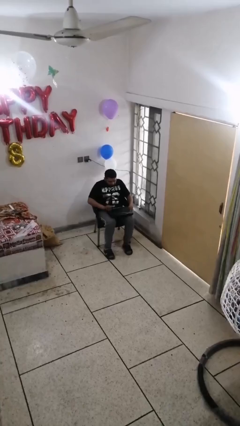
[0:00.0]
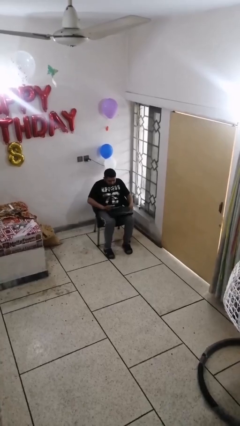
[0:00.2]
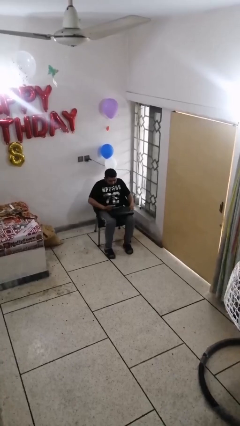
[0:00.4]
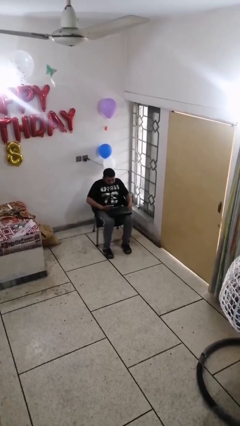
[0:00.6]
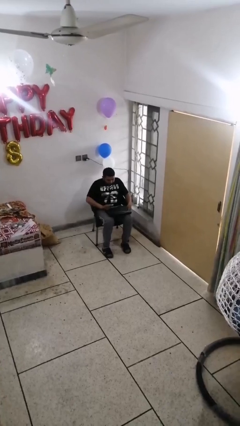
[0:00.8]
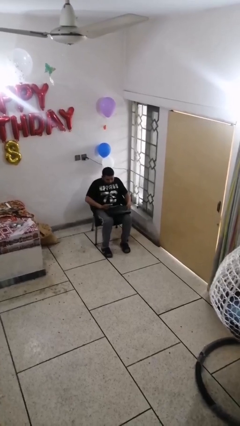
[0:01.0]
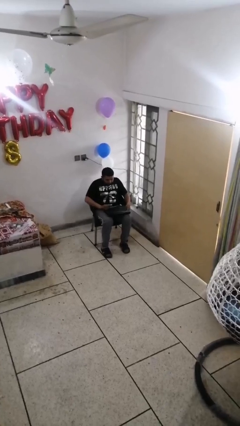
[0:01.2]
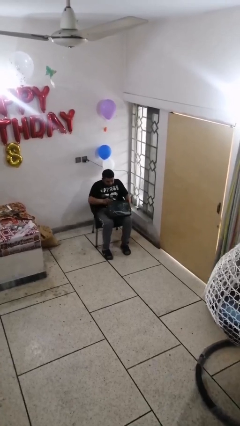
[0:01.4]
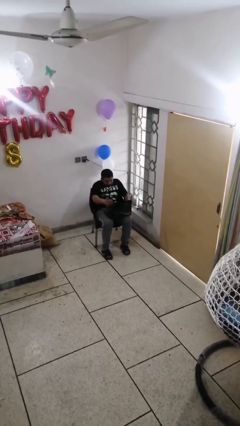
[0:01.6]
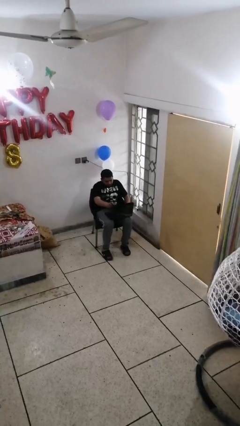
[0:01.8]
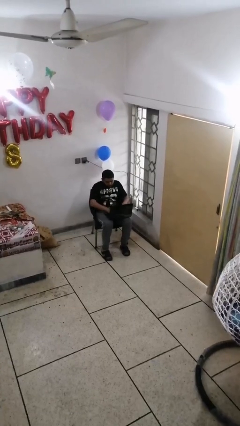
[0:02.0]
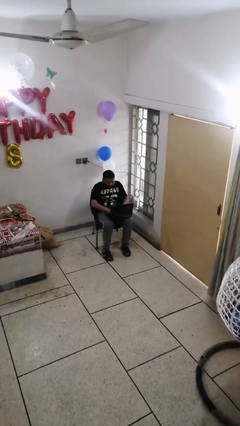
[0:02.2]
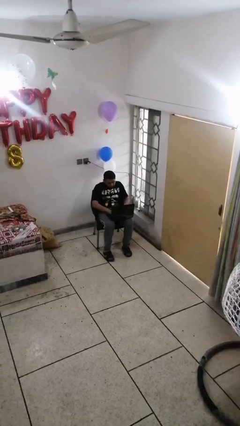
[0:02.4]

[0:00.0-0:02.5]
person interacts with laptop

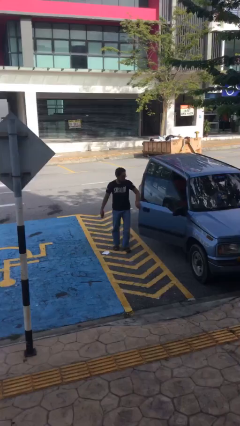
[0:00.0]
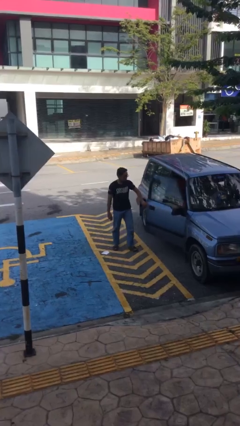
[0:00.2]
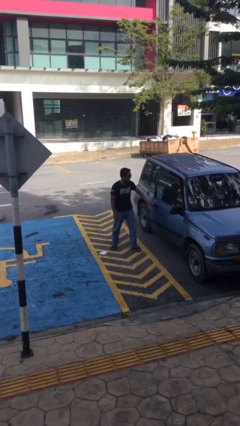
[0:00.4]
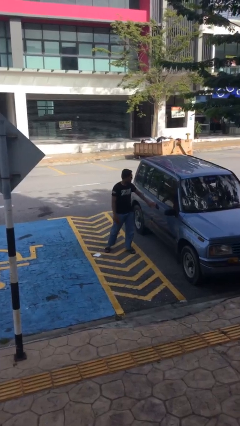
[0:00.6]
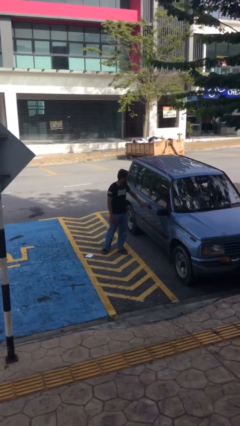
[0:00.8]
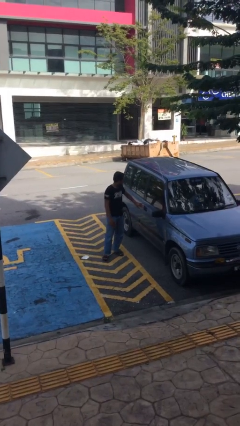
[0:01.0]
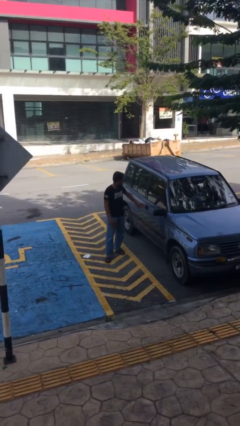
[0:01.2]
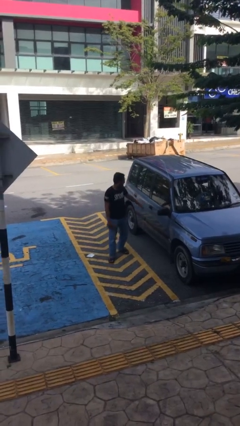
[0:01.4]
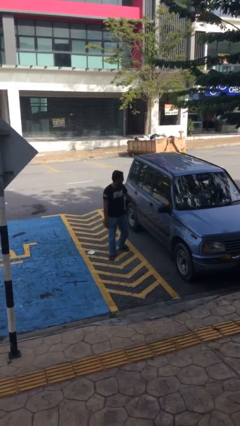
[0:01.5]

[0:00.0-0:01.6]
person closes car door

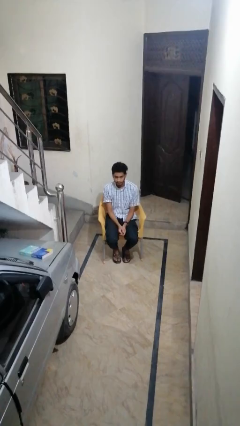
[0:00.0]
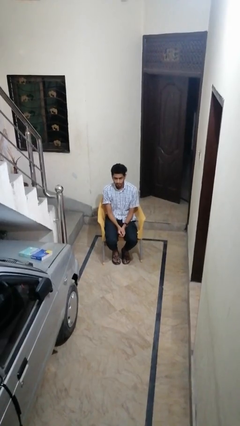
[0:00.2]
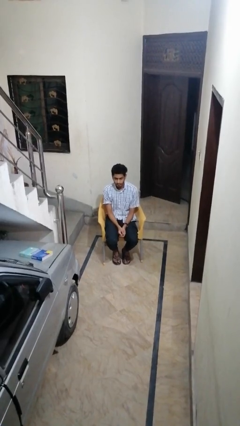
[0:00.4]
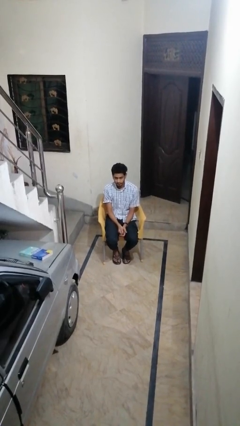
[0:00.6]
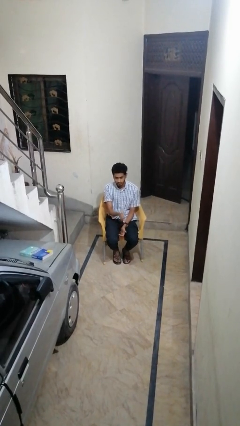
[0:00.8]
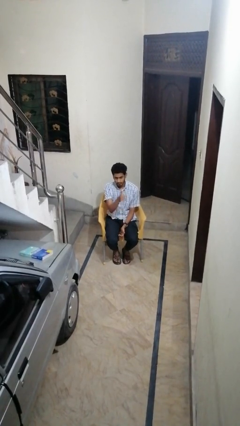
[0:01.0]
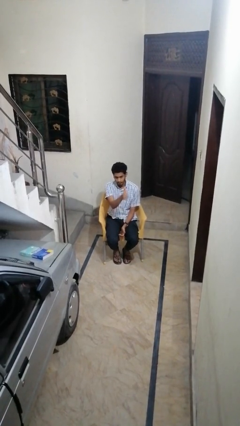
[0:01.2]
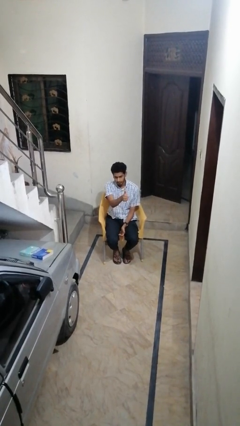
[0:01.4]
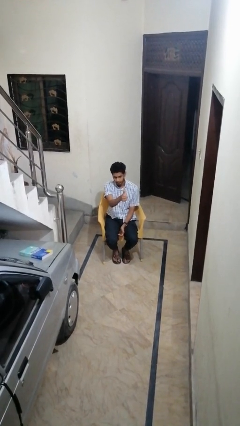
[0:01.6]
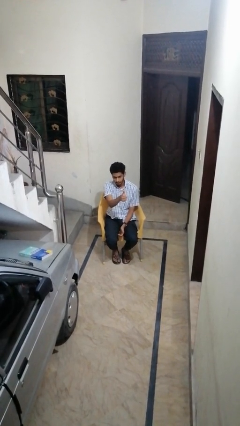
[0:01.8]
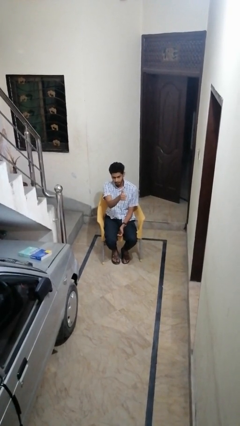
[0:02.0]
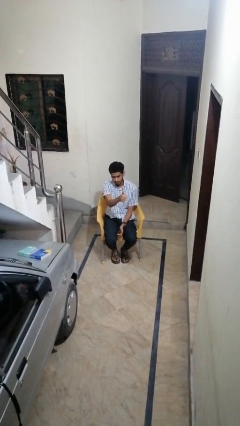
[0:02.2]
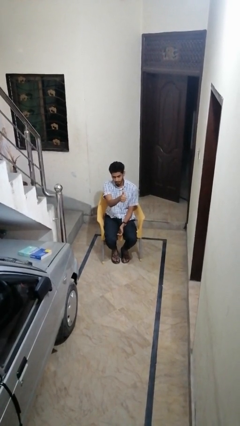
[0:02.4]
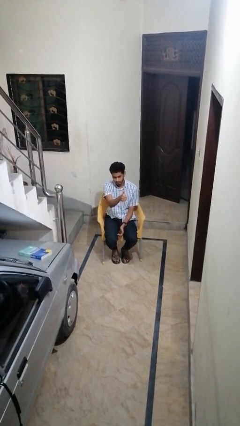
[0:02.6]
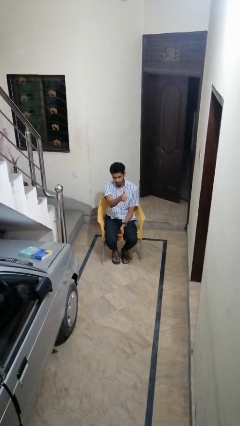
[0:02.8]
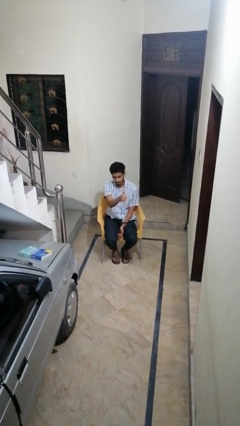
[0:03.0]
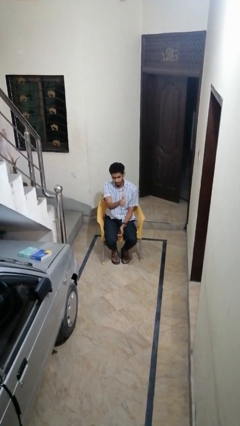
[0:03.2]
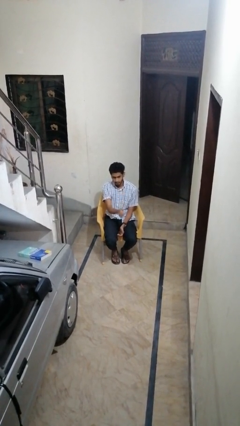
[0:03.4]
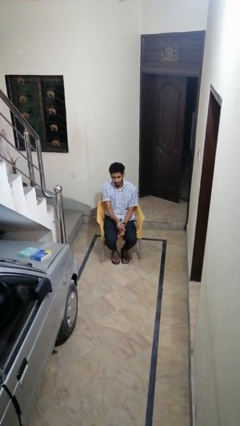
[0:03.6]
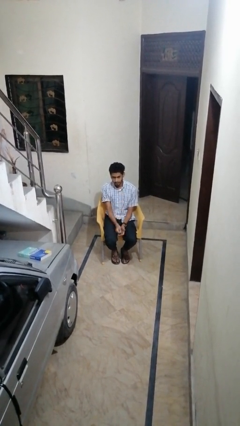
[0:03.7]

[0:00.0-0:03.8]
person gestures thumbs up

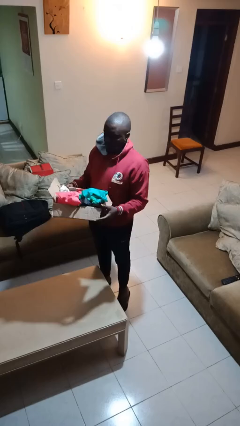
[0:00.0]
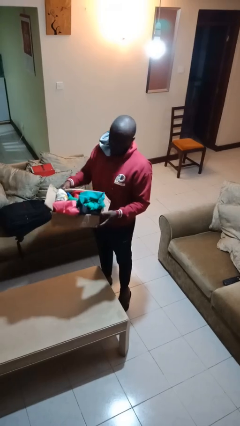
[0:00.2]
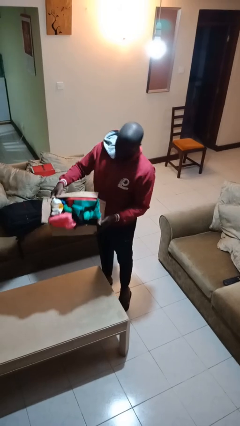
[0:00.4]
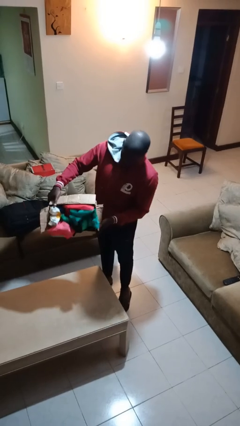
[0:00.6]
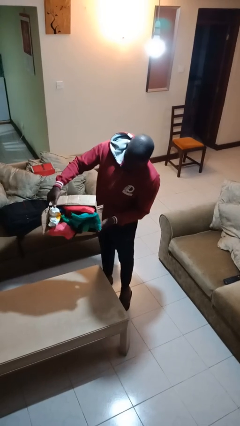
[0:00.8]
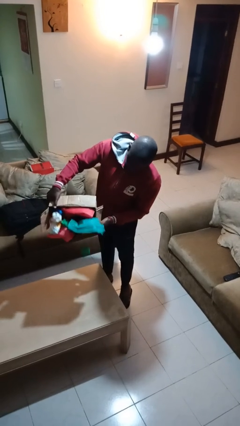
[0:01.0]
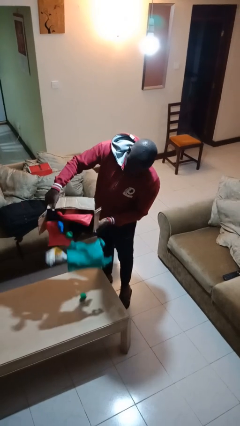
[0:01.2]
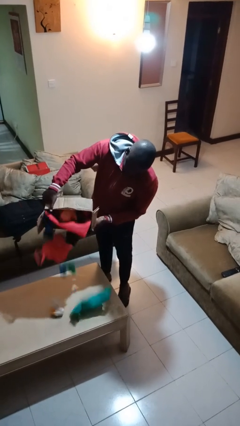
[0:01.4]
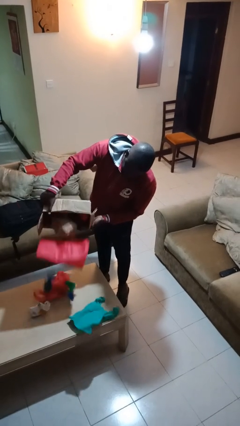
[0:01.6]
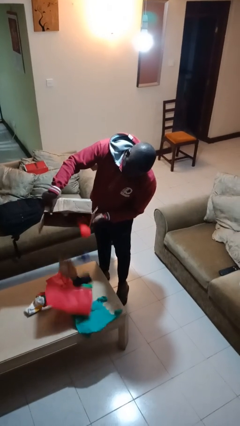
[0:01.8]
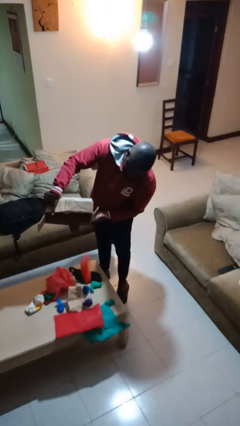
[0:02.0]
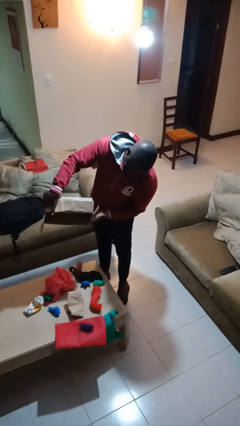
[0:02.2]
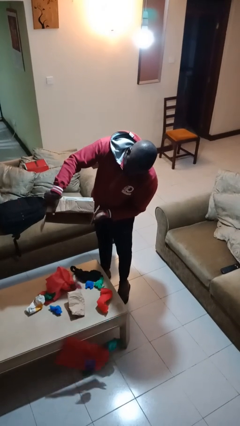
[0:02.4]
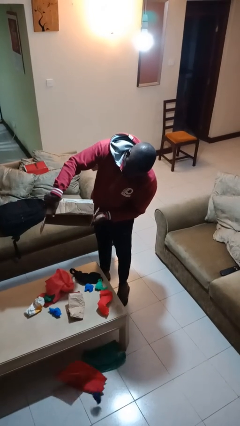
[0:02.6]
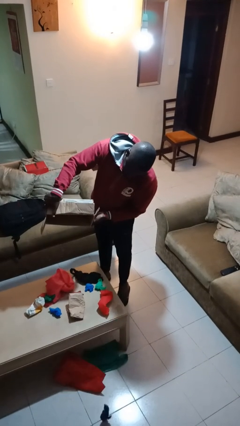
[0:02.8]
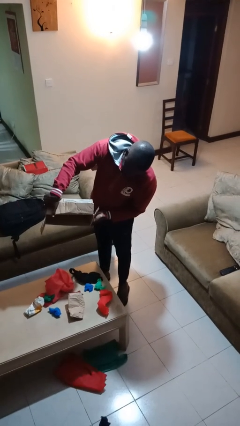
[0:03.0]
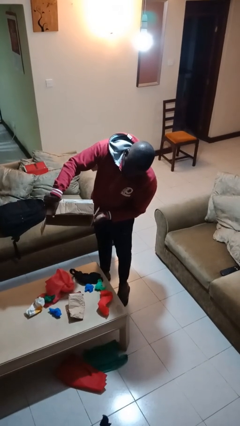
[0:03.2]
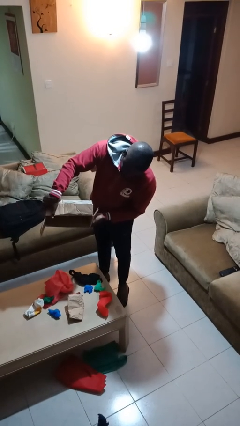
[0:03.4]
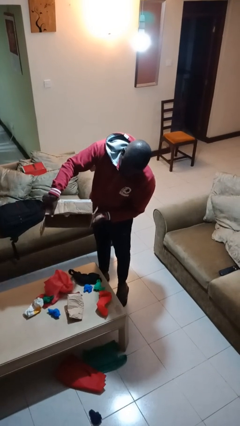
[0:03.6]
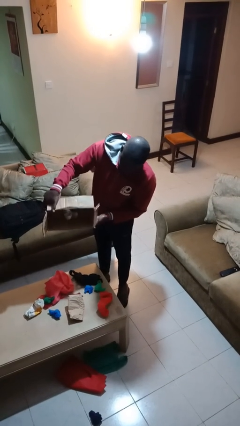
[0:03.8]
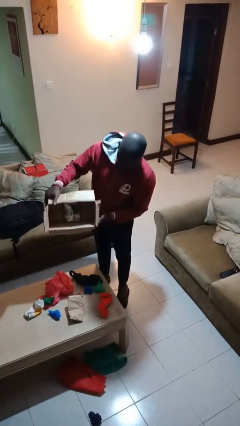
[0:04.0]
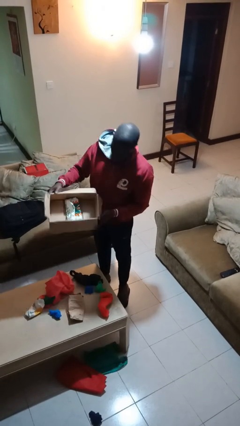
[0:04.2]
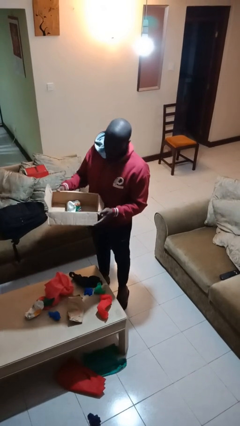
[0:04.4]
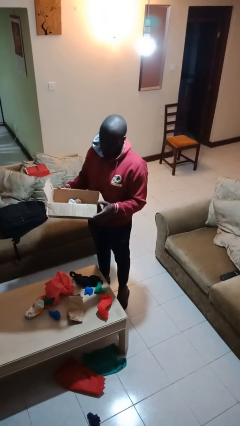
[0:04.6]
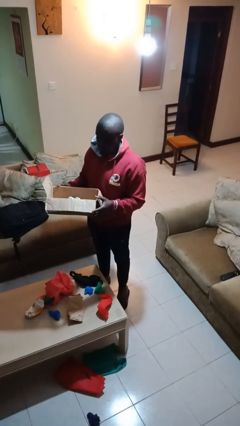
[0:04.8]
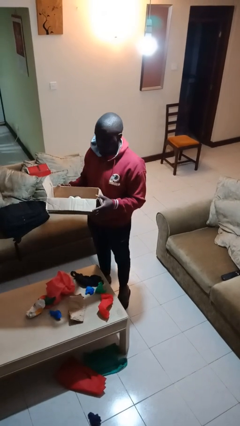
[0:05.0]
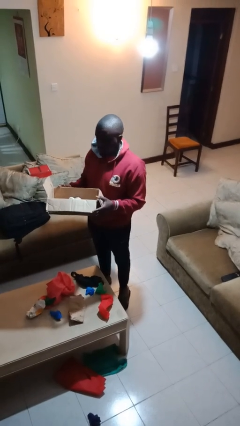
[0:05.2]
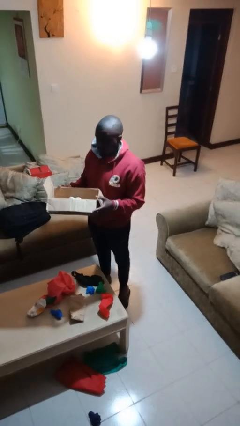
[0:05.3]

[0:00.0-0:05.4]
person unloads box onto table

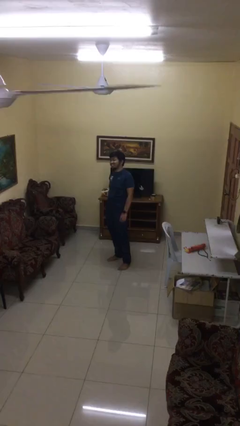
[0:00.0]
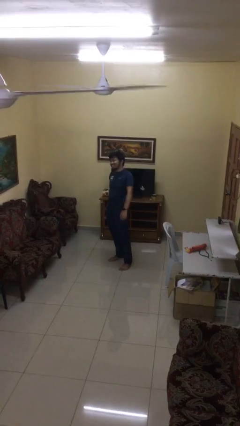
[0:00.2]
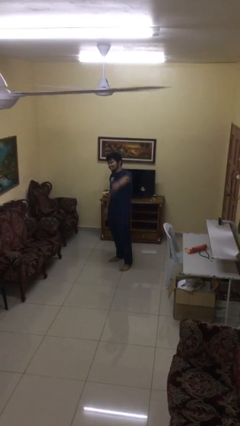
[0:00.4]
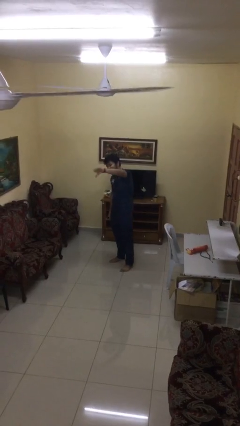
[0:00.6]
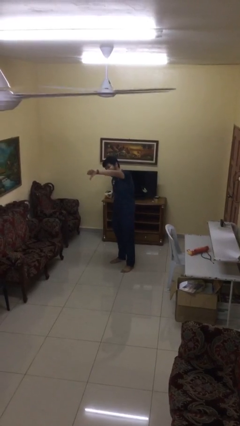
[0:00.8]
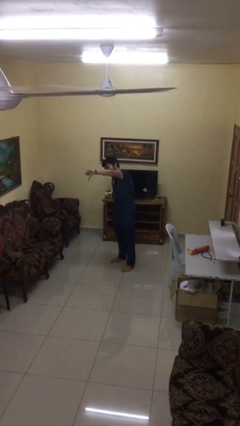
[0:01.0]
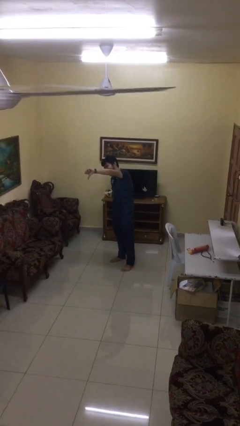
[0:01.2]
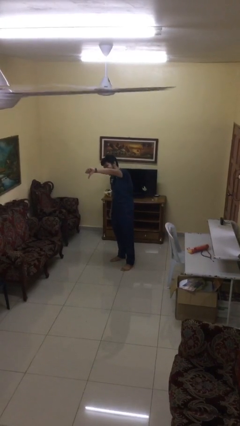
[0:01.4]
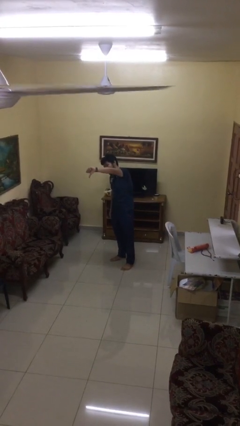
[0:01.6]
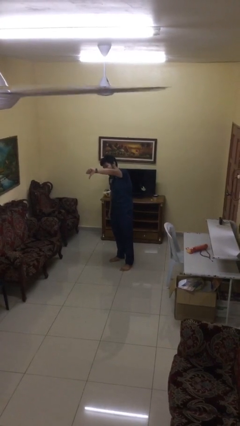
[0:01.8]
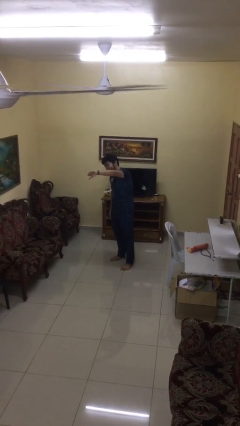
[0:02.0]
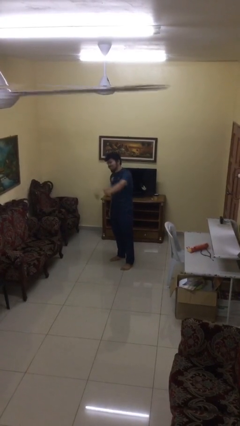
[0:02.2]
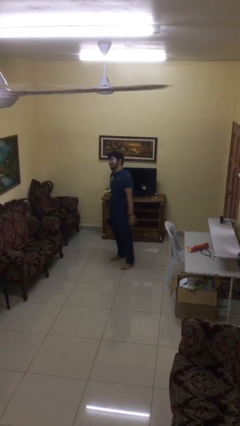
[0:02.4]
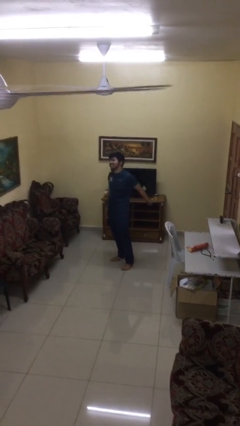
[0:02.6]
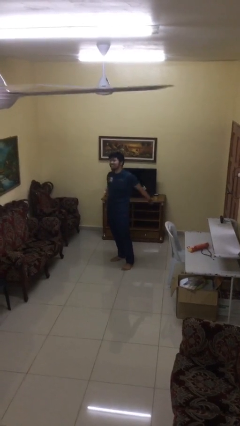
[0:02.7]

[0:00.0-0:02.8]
person gestures thumbs down

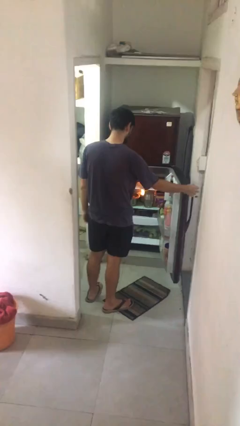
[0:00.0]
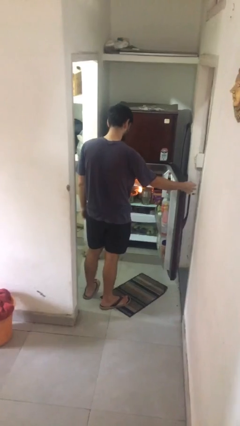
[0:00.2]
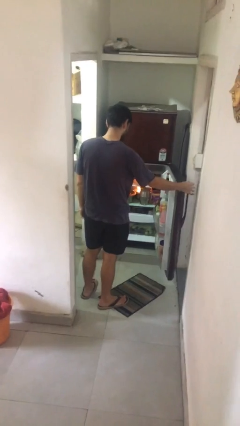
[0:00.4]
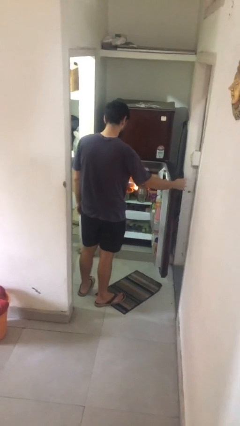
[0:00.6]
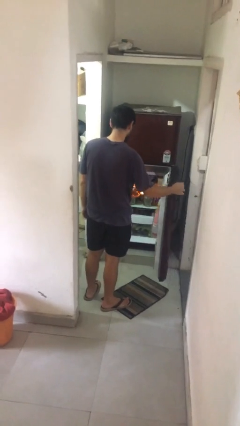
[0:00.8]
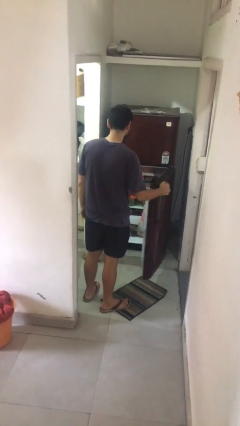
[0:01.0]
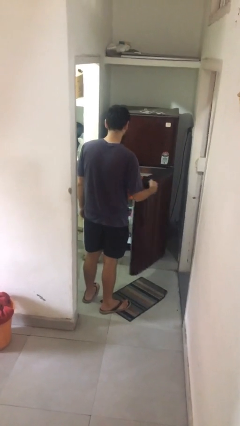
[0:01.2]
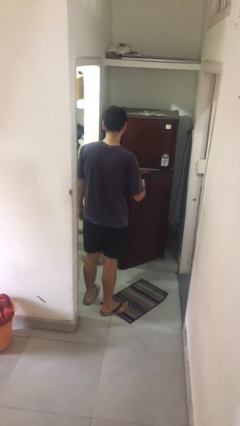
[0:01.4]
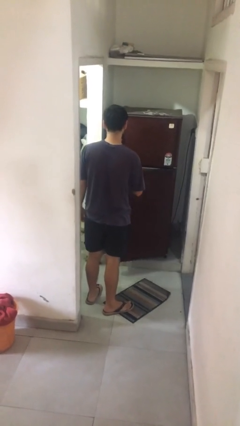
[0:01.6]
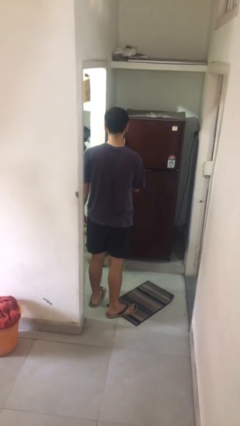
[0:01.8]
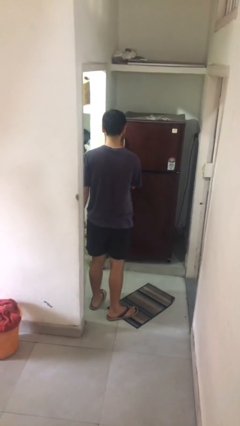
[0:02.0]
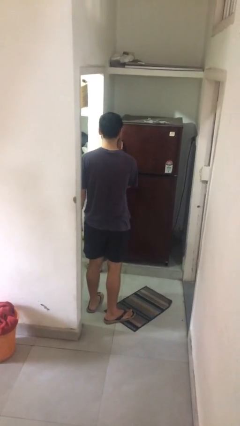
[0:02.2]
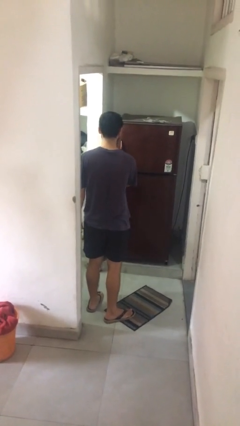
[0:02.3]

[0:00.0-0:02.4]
person closes refrigerator
